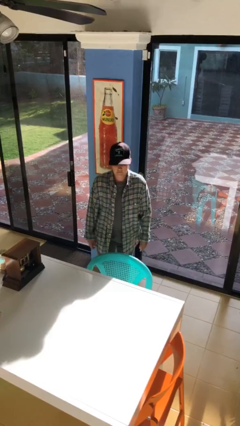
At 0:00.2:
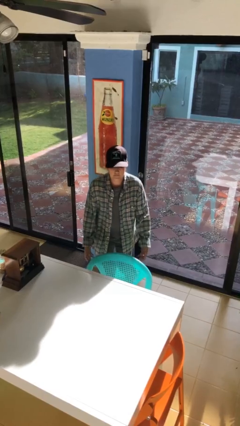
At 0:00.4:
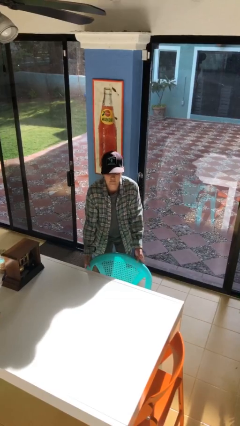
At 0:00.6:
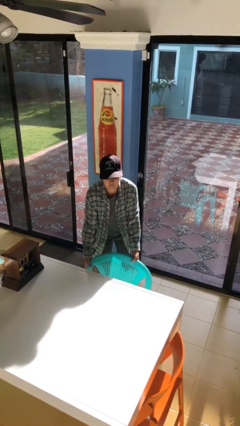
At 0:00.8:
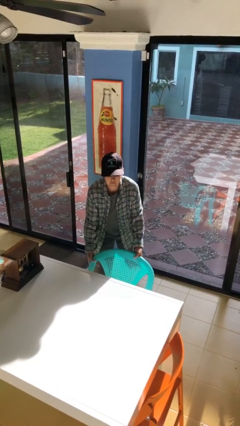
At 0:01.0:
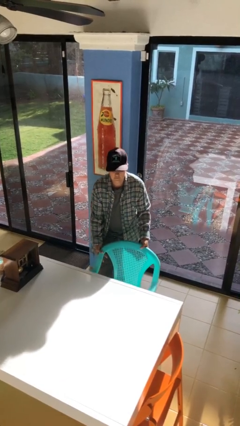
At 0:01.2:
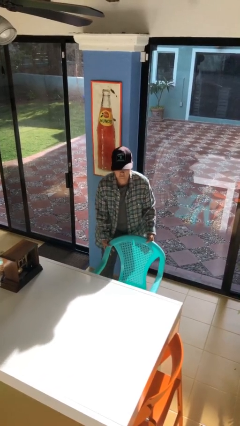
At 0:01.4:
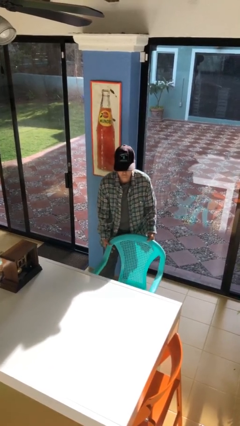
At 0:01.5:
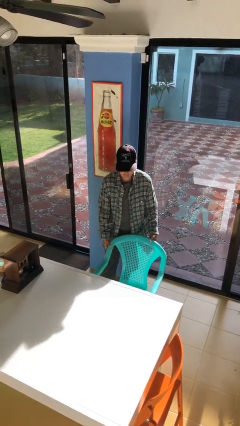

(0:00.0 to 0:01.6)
person pulls out chair

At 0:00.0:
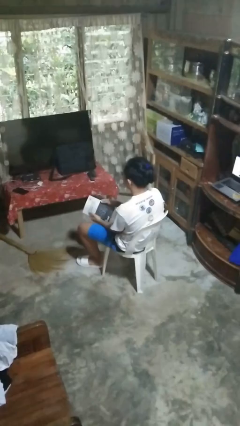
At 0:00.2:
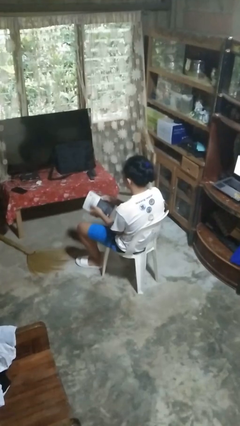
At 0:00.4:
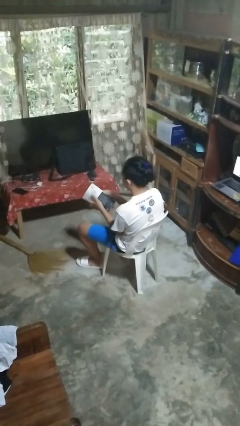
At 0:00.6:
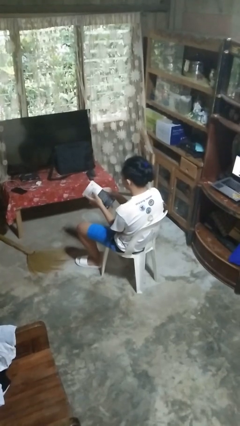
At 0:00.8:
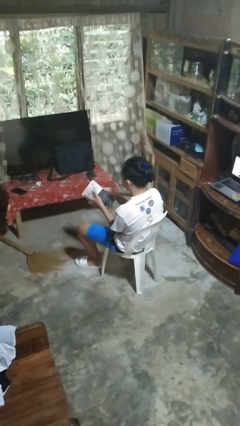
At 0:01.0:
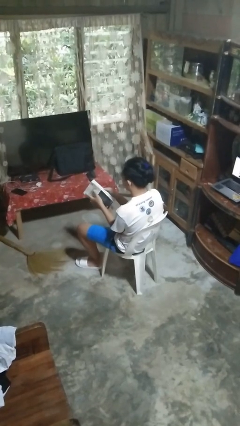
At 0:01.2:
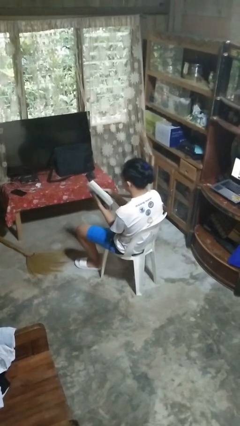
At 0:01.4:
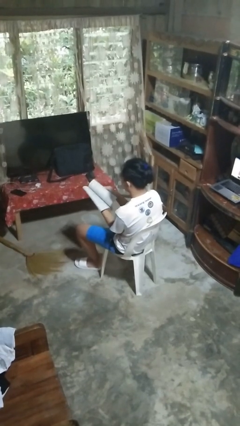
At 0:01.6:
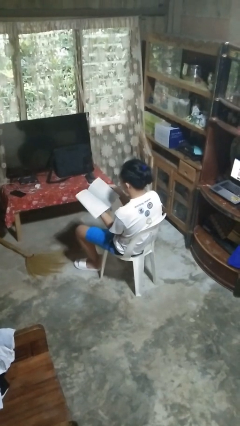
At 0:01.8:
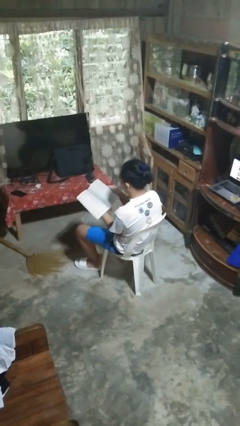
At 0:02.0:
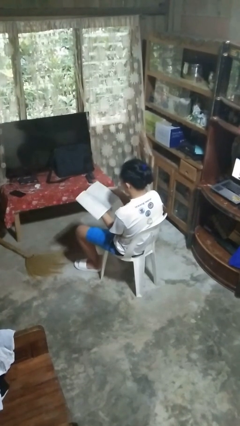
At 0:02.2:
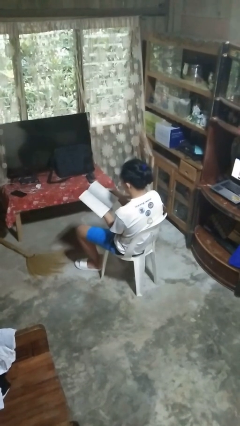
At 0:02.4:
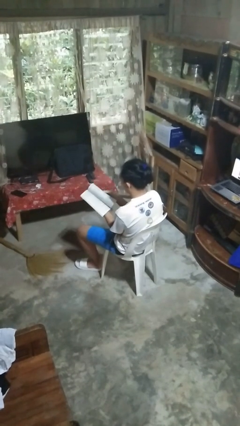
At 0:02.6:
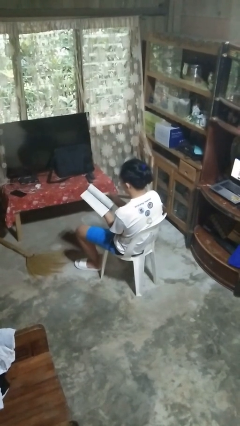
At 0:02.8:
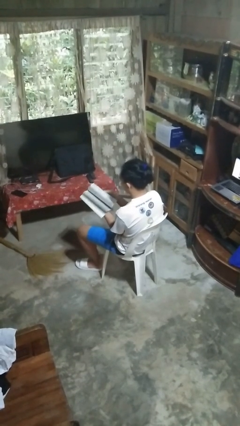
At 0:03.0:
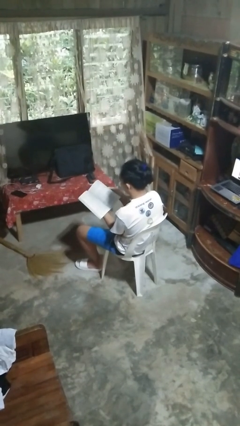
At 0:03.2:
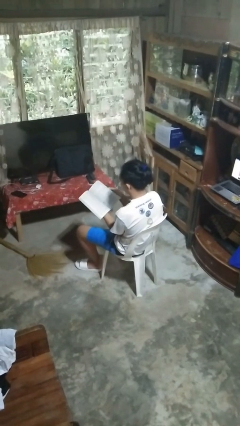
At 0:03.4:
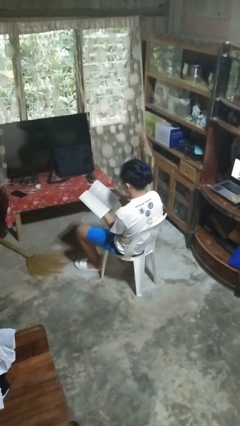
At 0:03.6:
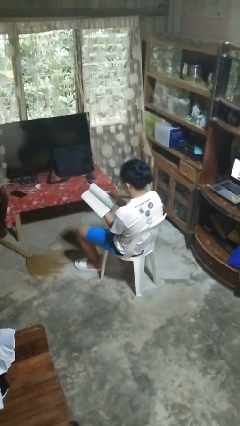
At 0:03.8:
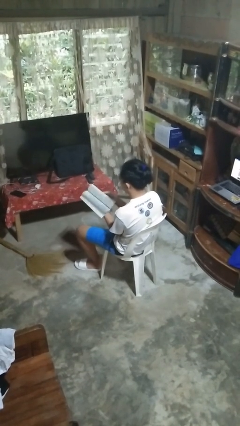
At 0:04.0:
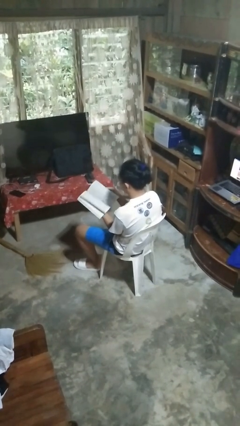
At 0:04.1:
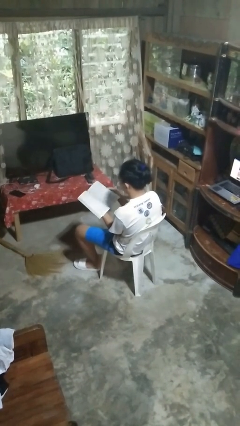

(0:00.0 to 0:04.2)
person reads book

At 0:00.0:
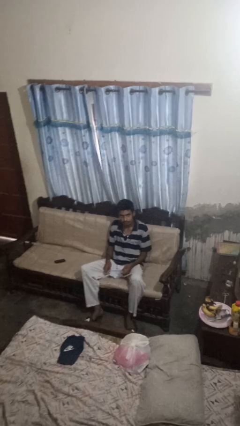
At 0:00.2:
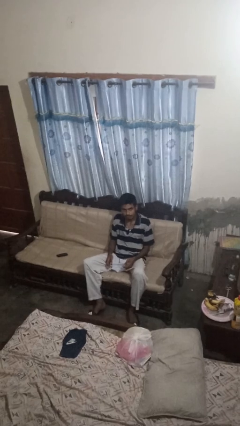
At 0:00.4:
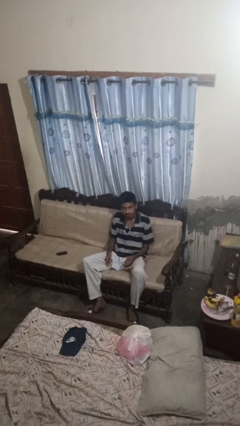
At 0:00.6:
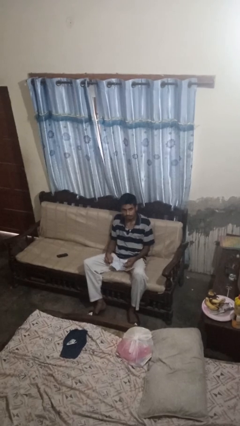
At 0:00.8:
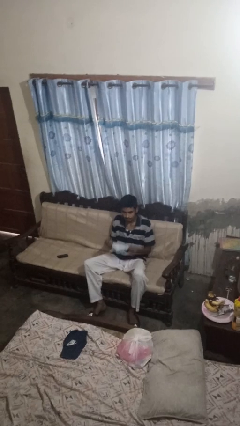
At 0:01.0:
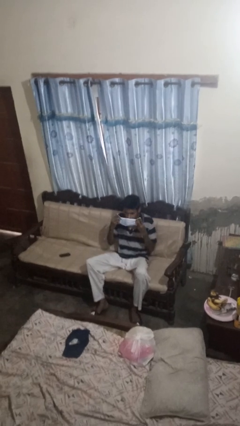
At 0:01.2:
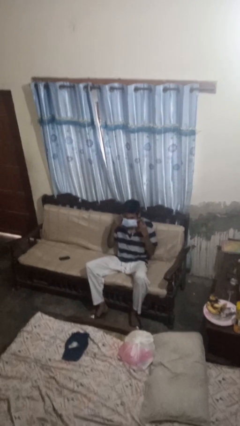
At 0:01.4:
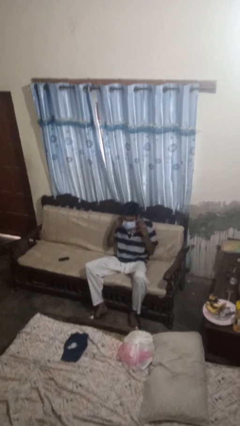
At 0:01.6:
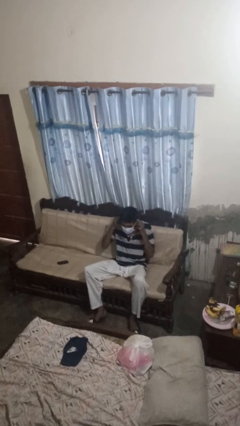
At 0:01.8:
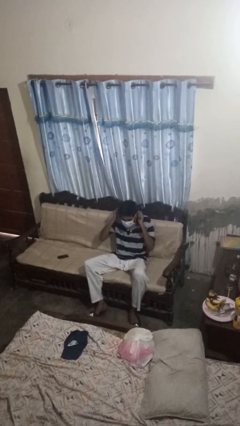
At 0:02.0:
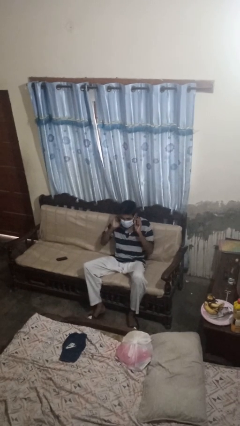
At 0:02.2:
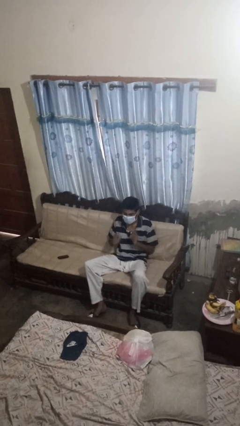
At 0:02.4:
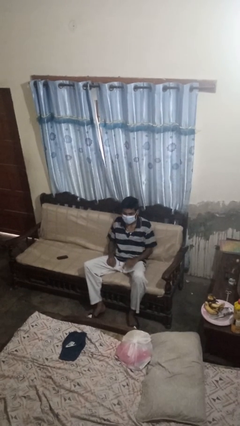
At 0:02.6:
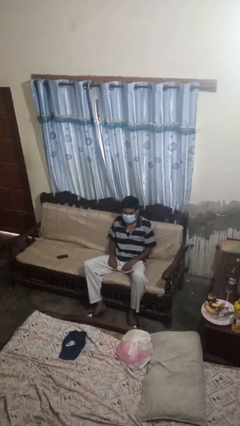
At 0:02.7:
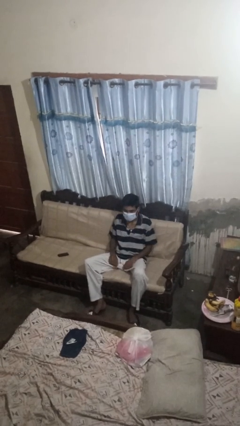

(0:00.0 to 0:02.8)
person puts on facemask

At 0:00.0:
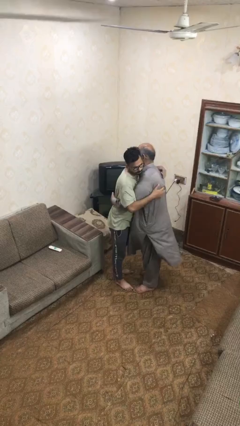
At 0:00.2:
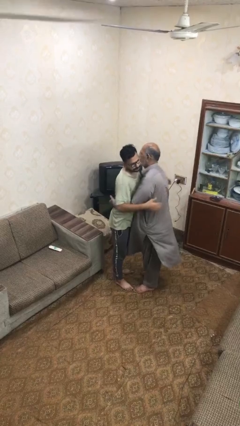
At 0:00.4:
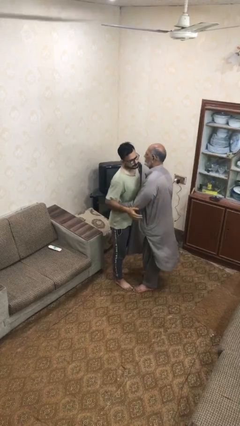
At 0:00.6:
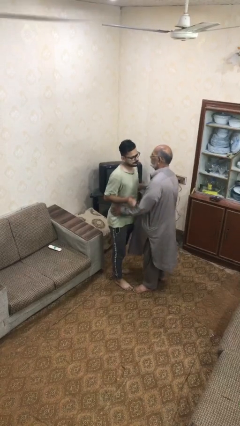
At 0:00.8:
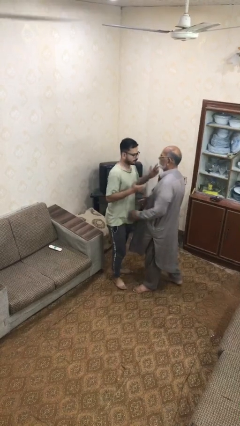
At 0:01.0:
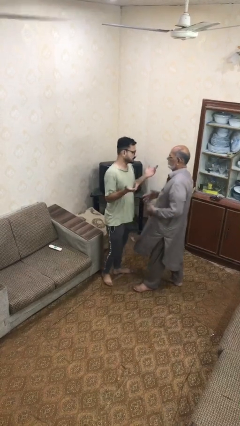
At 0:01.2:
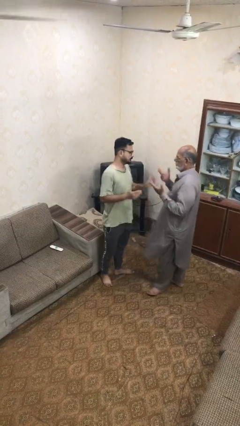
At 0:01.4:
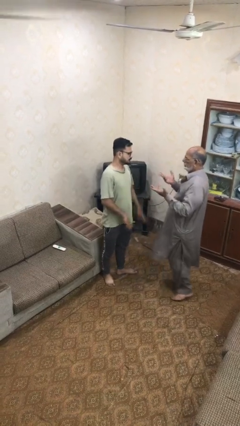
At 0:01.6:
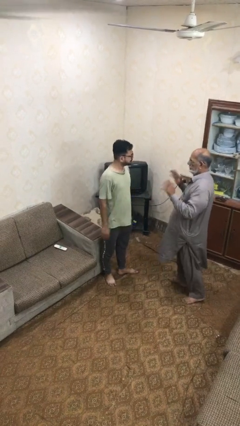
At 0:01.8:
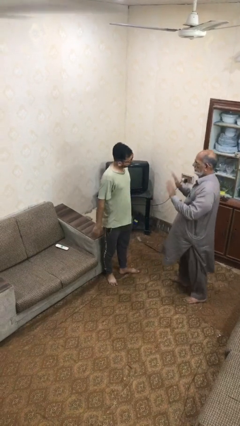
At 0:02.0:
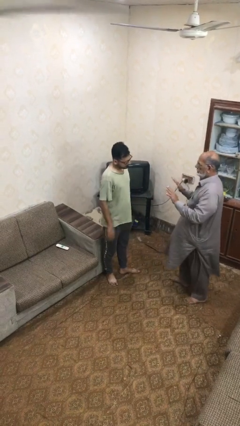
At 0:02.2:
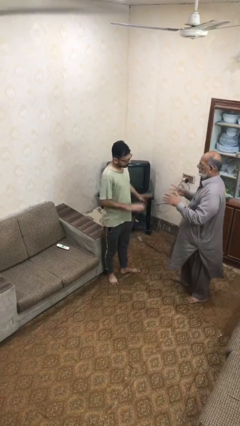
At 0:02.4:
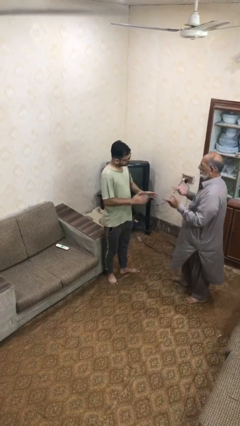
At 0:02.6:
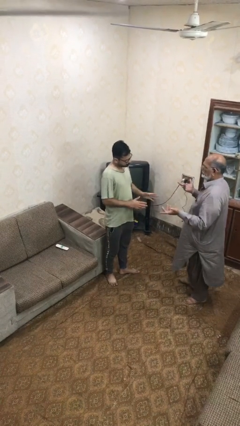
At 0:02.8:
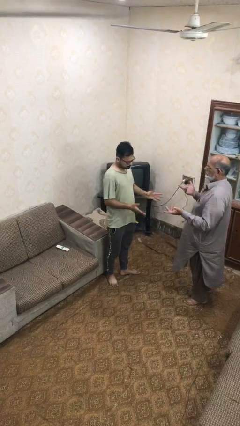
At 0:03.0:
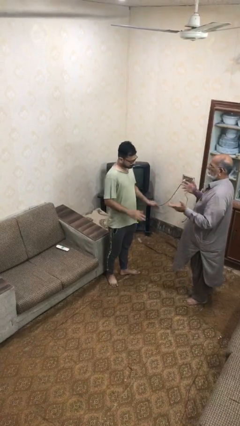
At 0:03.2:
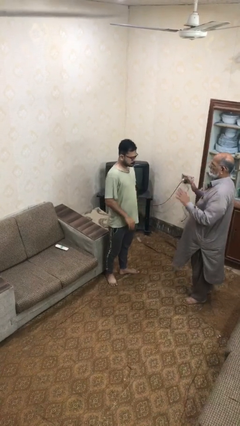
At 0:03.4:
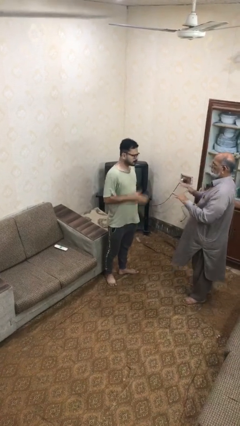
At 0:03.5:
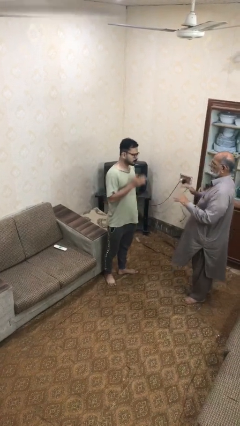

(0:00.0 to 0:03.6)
person talks to person

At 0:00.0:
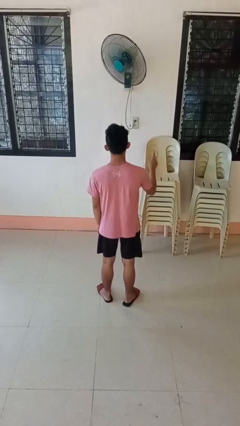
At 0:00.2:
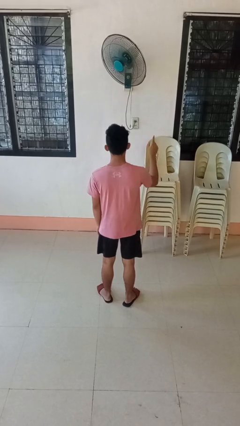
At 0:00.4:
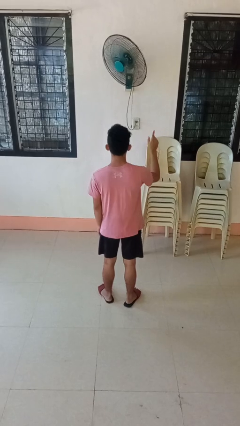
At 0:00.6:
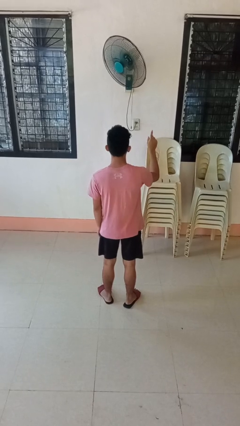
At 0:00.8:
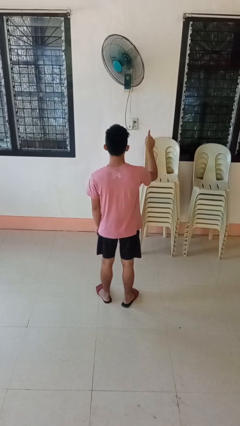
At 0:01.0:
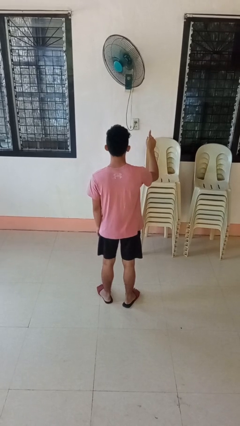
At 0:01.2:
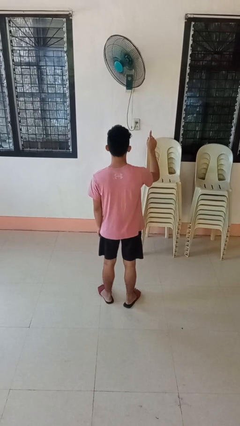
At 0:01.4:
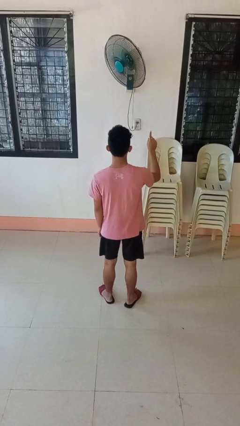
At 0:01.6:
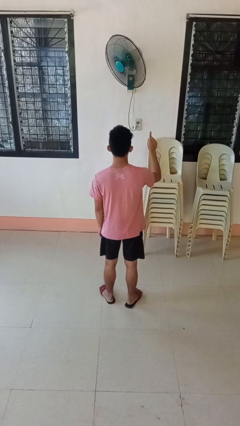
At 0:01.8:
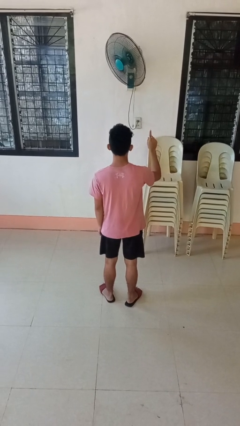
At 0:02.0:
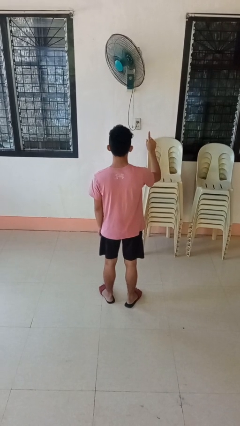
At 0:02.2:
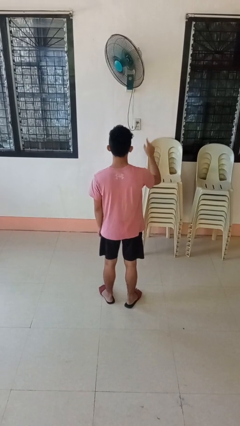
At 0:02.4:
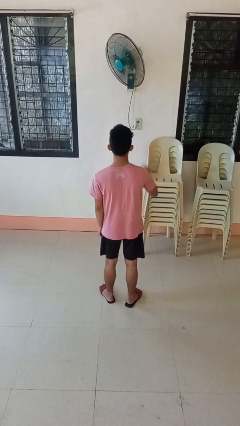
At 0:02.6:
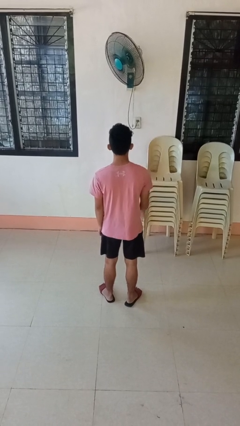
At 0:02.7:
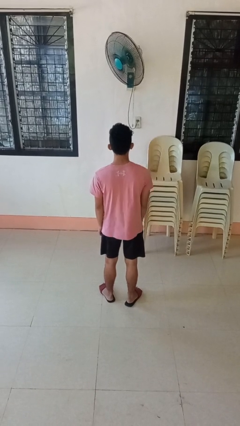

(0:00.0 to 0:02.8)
person gestures number one

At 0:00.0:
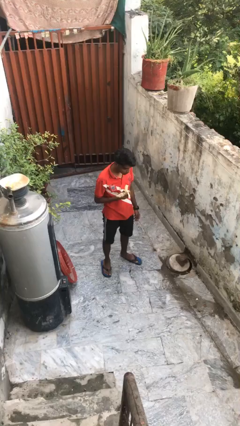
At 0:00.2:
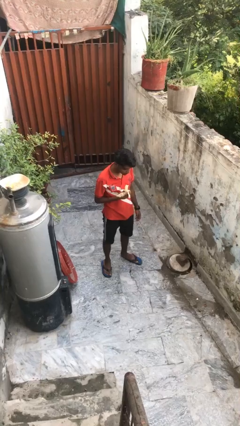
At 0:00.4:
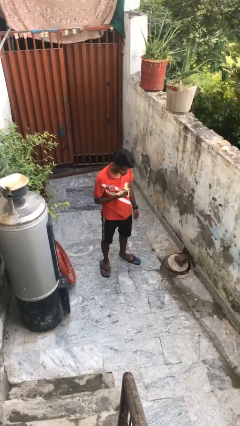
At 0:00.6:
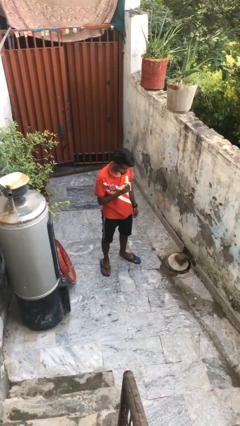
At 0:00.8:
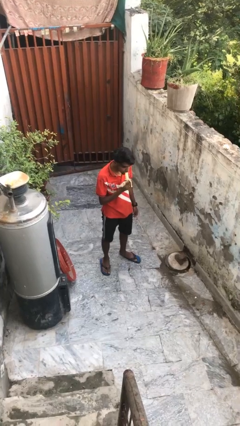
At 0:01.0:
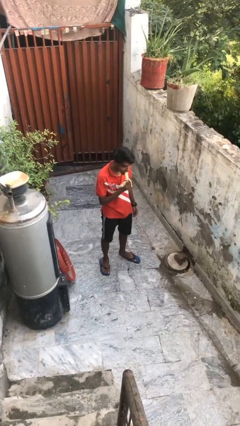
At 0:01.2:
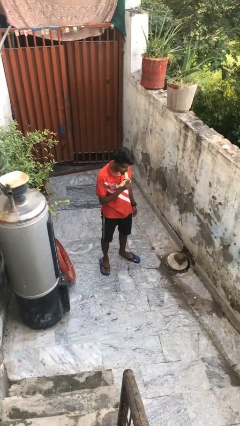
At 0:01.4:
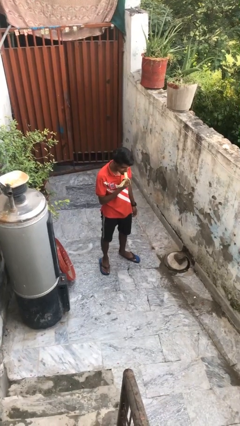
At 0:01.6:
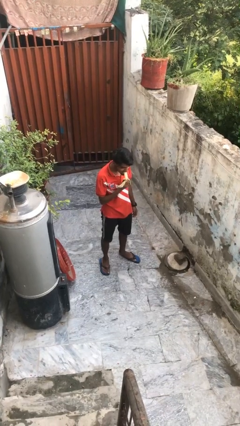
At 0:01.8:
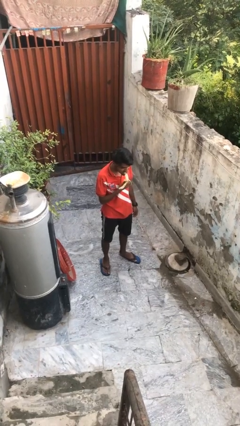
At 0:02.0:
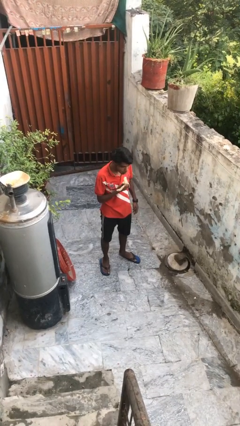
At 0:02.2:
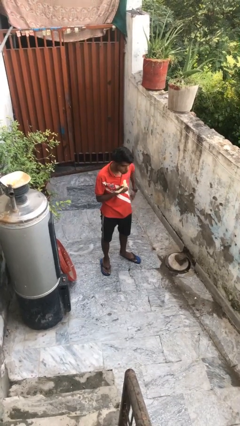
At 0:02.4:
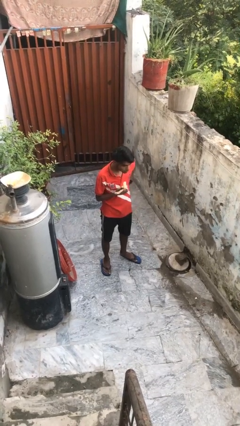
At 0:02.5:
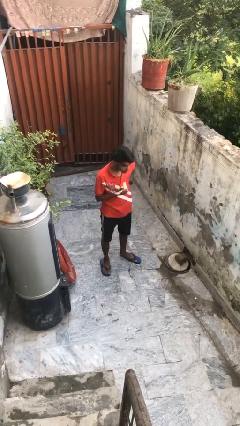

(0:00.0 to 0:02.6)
person eats banana
